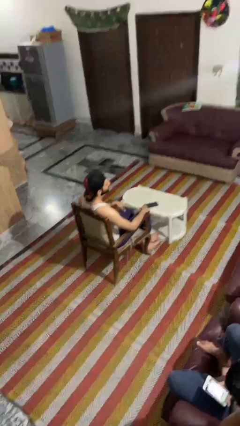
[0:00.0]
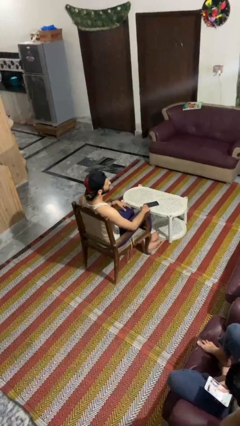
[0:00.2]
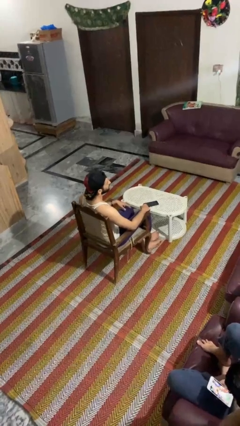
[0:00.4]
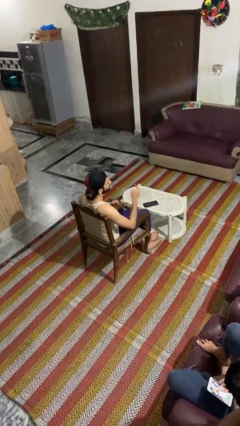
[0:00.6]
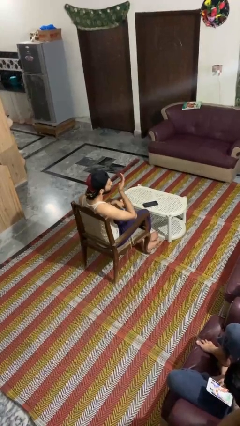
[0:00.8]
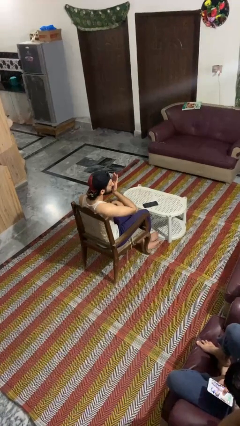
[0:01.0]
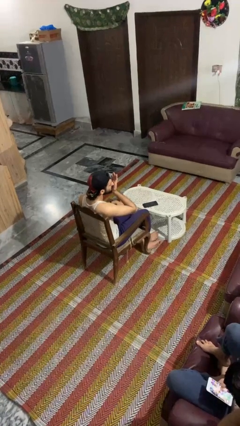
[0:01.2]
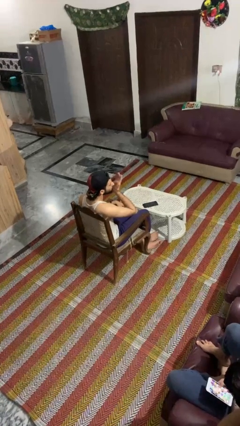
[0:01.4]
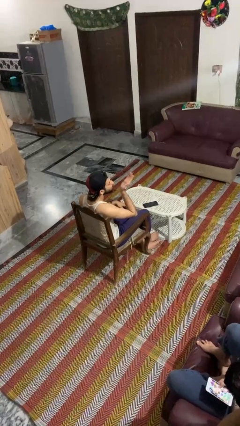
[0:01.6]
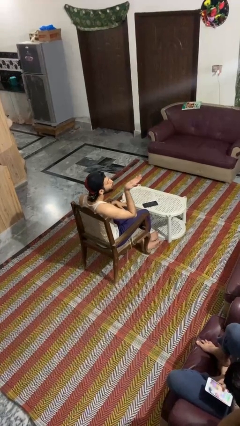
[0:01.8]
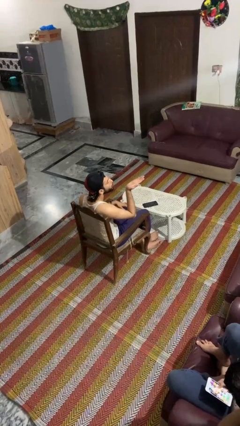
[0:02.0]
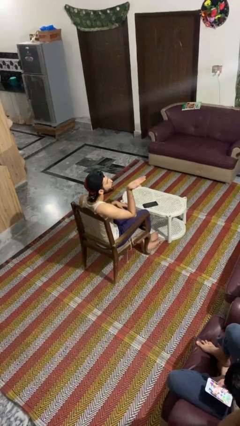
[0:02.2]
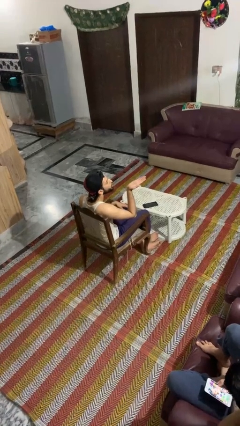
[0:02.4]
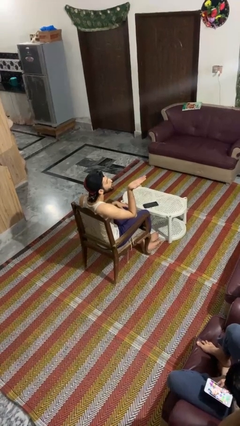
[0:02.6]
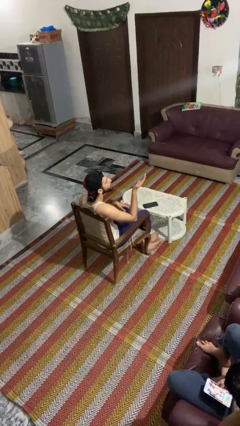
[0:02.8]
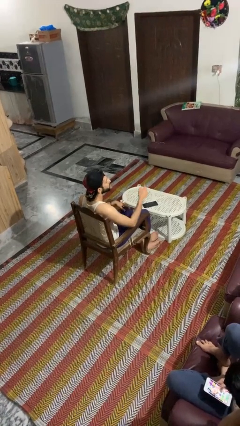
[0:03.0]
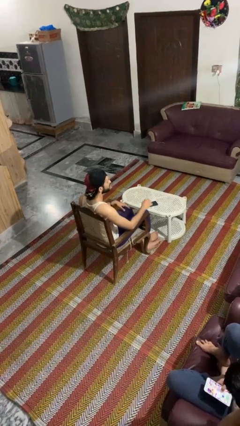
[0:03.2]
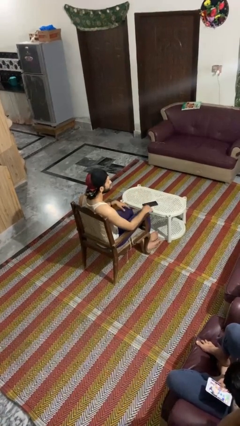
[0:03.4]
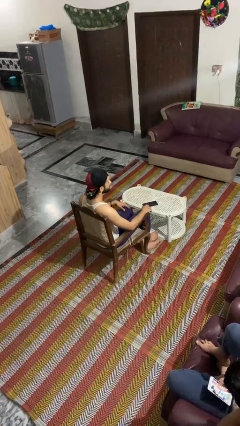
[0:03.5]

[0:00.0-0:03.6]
person gestures blow kiss

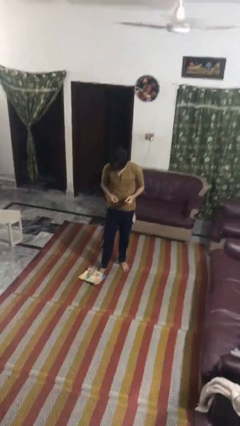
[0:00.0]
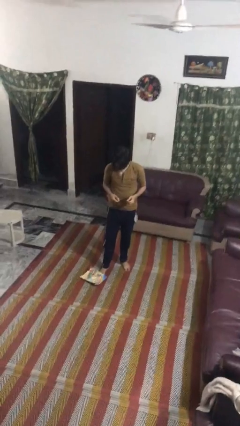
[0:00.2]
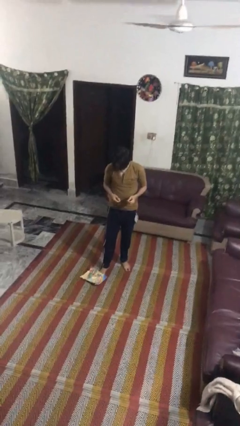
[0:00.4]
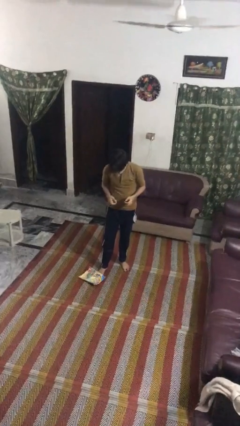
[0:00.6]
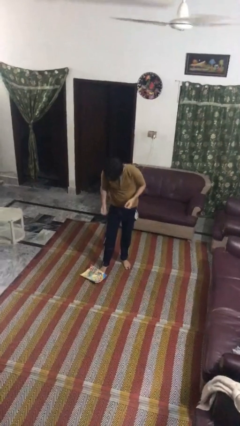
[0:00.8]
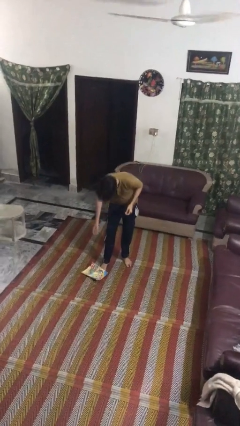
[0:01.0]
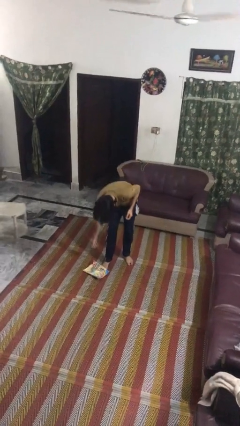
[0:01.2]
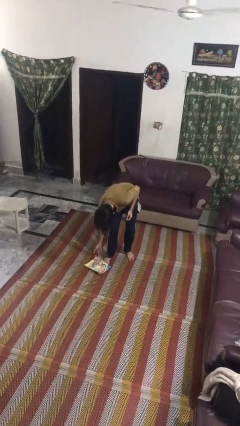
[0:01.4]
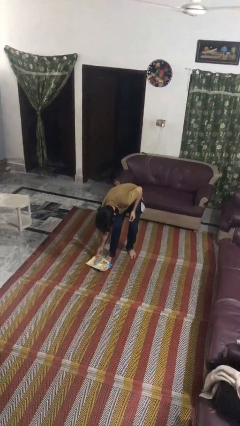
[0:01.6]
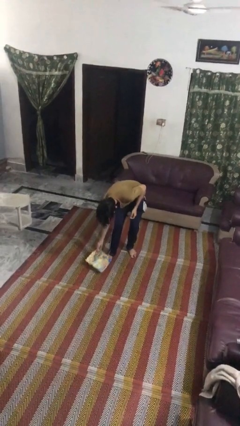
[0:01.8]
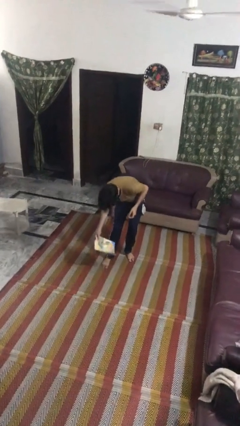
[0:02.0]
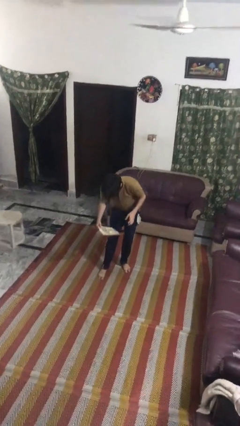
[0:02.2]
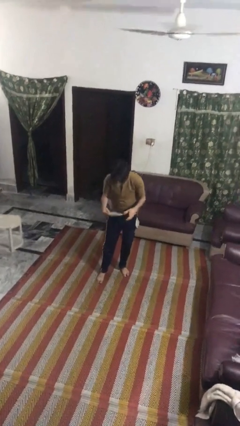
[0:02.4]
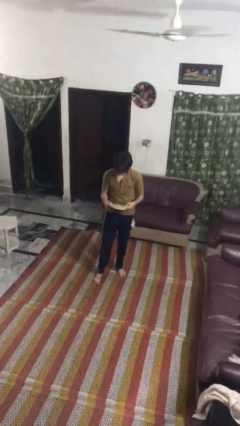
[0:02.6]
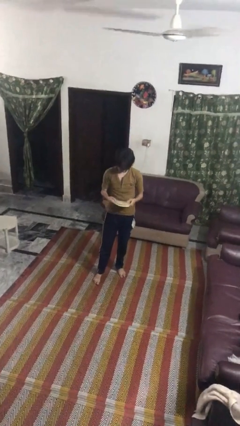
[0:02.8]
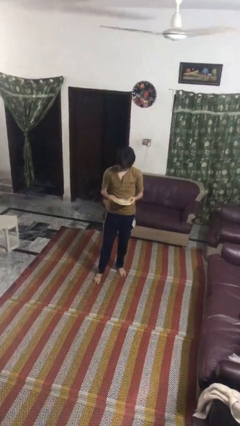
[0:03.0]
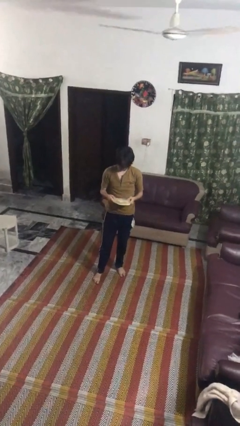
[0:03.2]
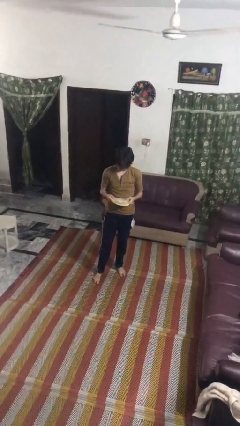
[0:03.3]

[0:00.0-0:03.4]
person picks up object from floor

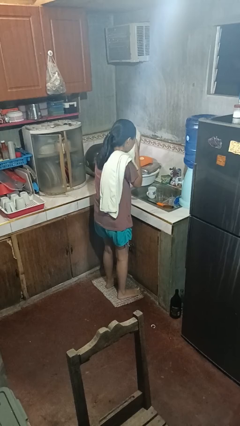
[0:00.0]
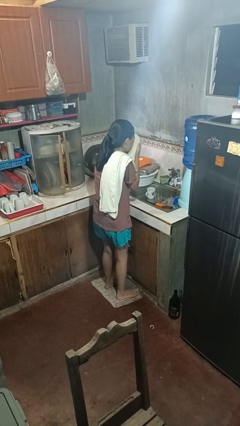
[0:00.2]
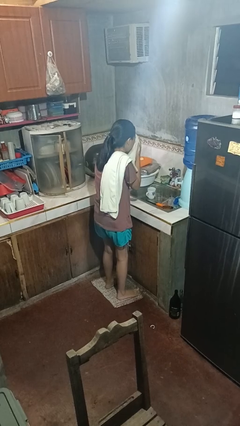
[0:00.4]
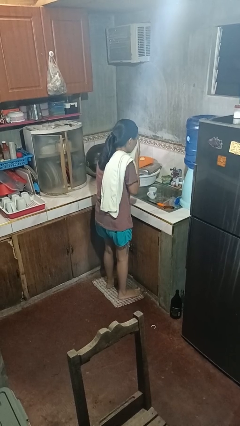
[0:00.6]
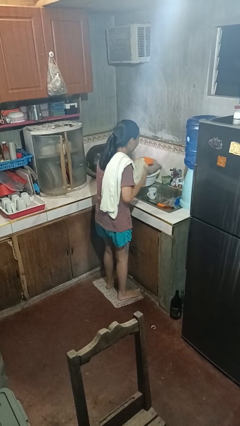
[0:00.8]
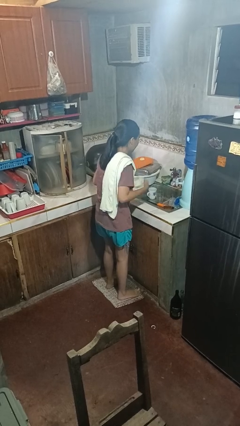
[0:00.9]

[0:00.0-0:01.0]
person dries face with towel

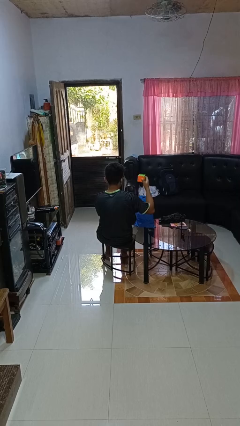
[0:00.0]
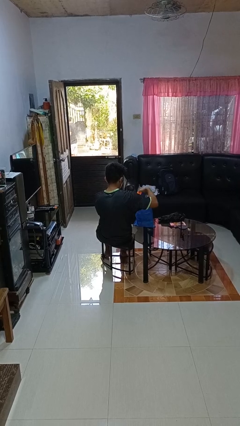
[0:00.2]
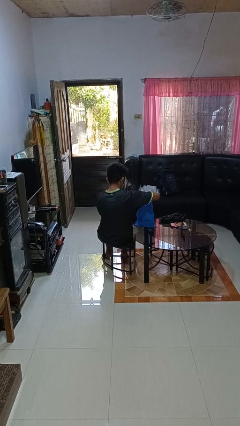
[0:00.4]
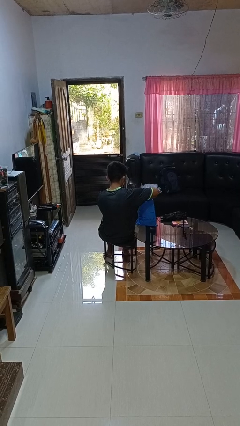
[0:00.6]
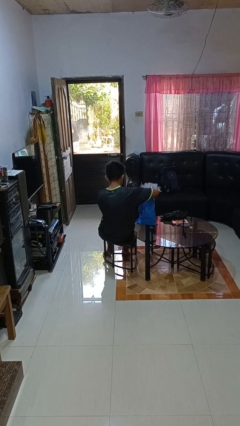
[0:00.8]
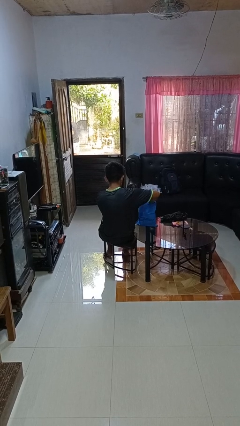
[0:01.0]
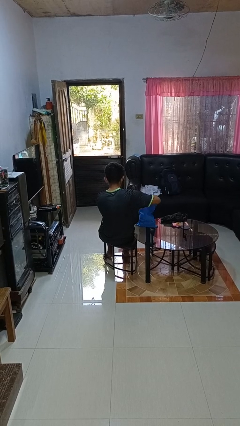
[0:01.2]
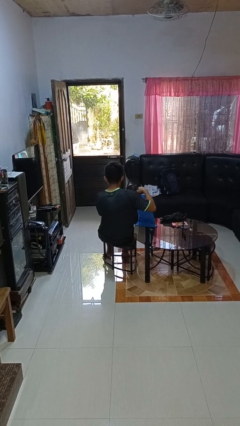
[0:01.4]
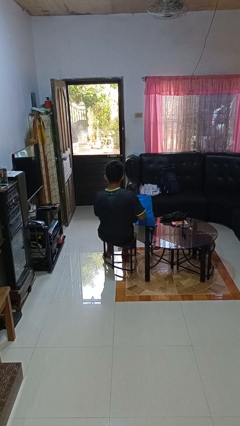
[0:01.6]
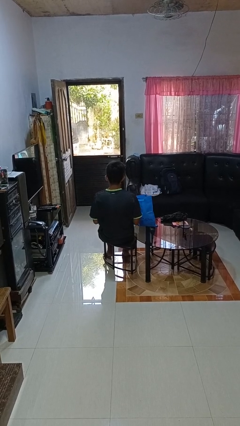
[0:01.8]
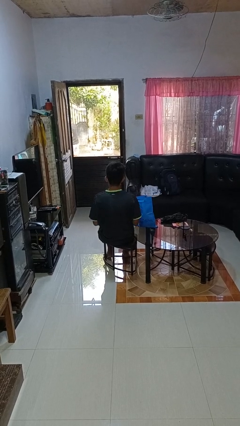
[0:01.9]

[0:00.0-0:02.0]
person puts object into bag

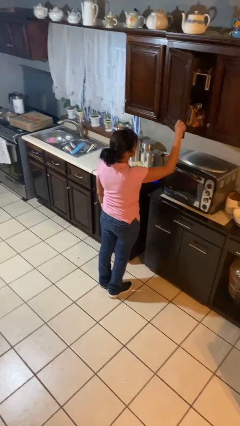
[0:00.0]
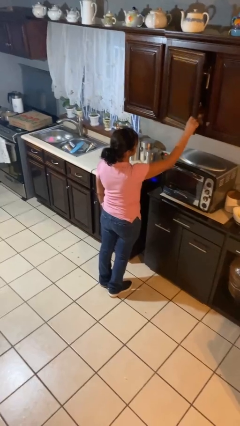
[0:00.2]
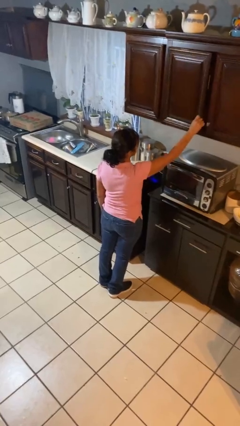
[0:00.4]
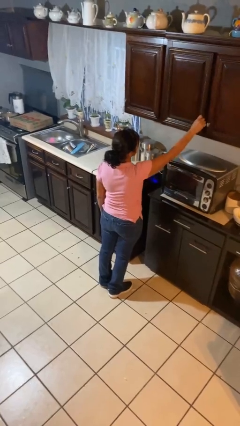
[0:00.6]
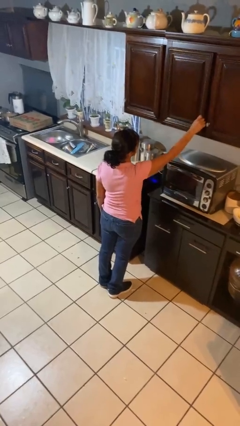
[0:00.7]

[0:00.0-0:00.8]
person closes cabinet

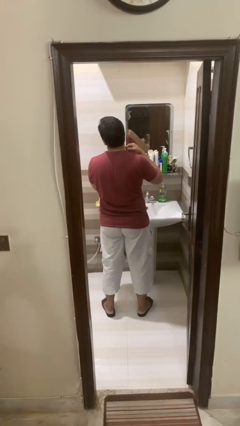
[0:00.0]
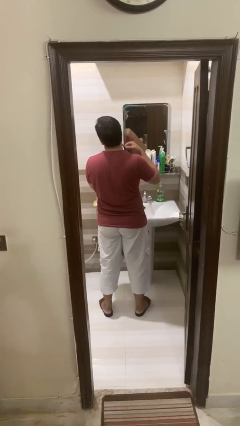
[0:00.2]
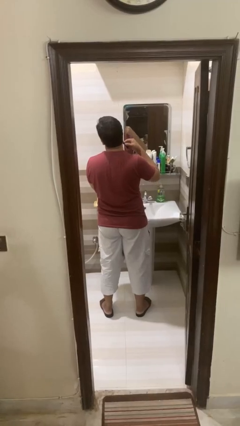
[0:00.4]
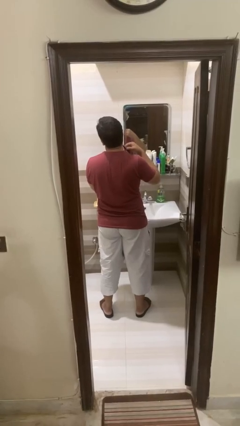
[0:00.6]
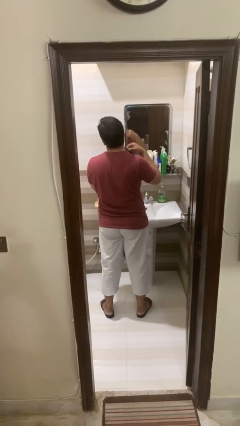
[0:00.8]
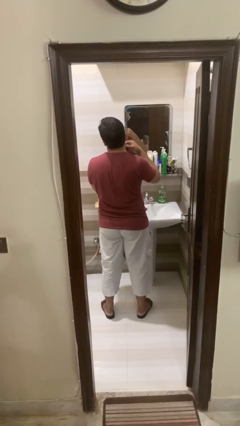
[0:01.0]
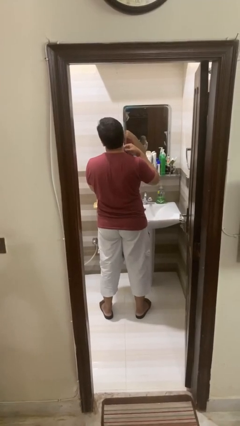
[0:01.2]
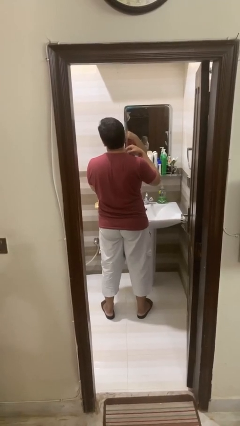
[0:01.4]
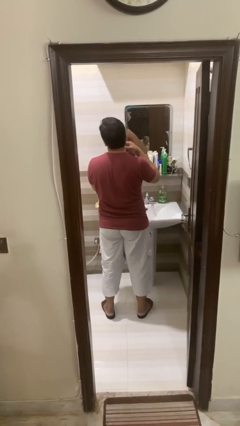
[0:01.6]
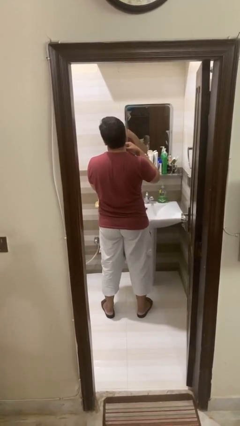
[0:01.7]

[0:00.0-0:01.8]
person shaves face

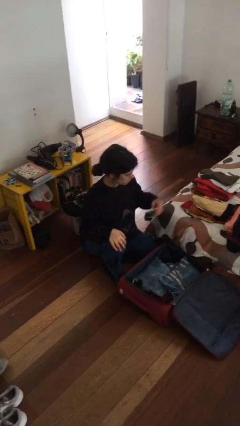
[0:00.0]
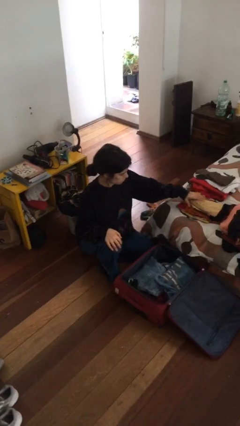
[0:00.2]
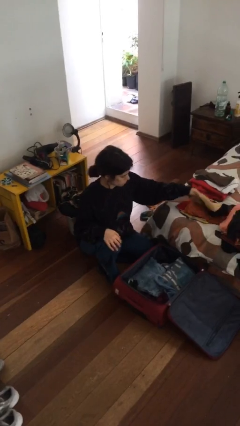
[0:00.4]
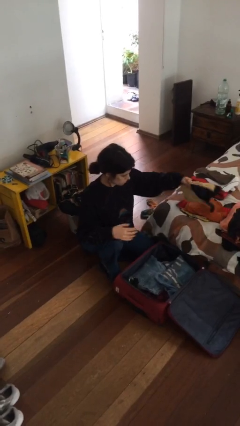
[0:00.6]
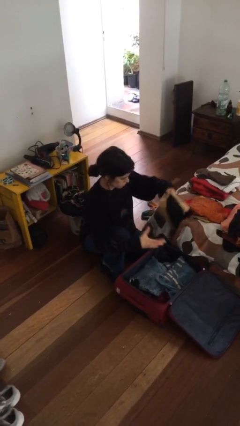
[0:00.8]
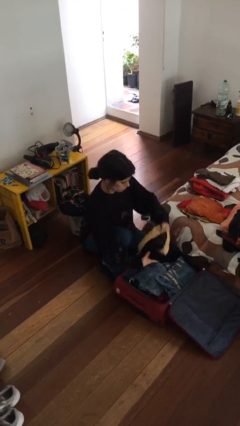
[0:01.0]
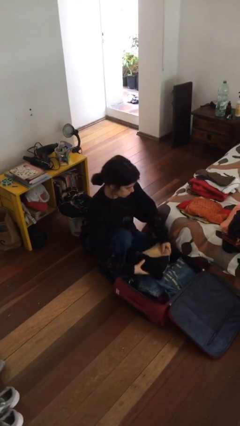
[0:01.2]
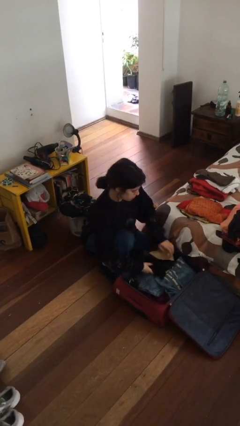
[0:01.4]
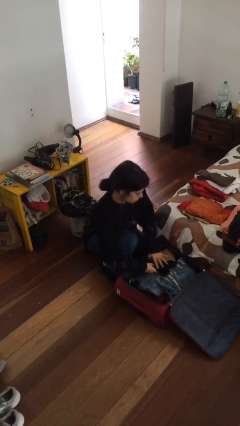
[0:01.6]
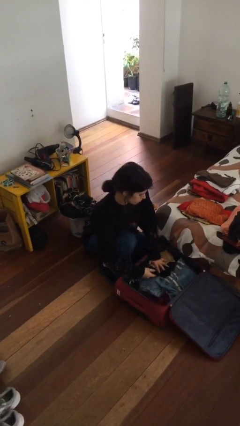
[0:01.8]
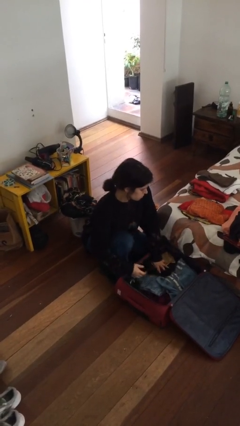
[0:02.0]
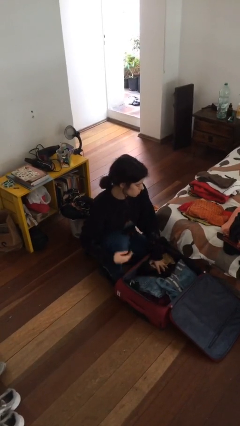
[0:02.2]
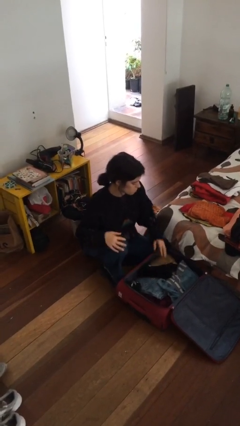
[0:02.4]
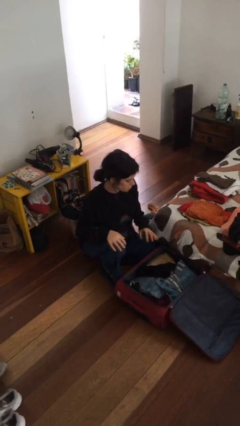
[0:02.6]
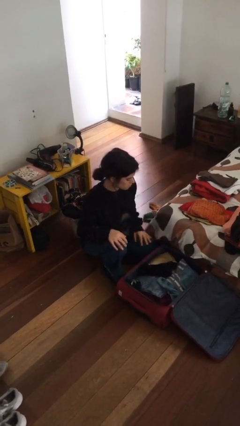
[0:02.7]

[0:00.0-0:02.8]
person loads clothes into suitcase

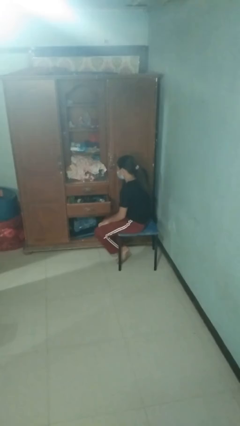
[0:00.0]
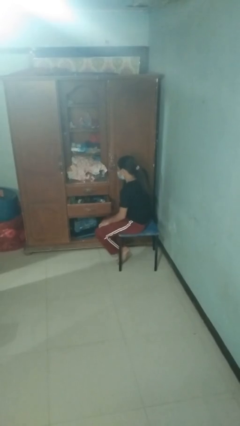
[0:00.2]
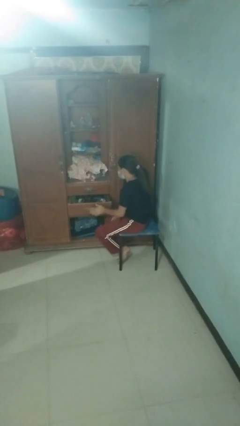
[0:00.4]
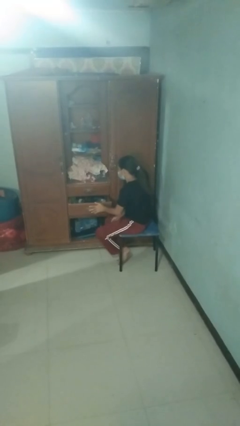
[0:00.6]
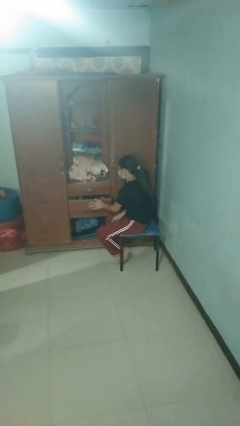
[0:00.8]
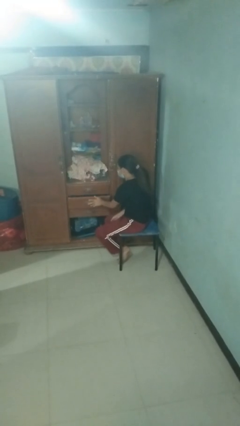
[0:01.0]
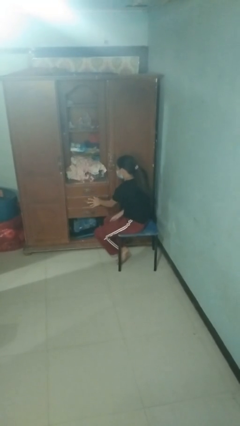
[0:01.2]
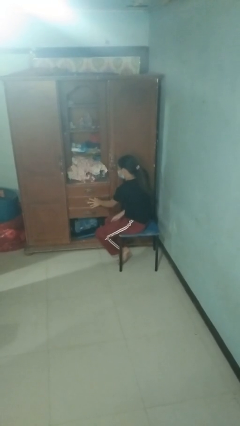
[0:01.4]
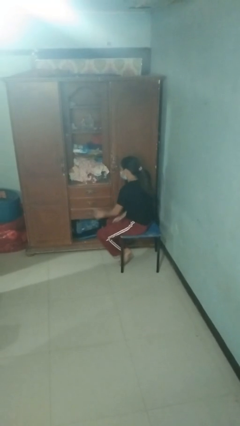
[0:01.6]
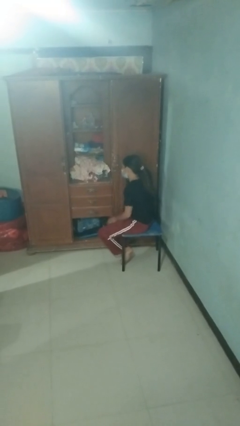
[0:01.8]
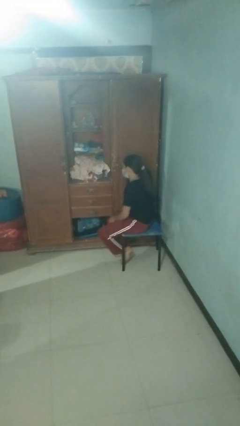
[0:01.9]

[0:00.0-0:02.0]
person closes dresser drawer
